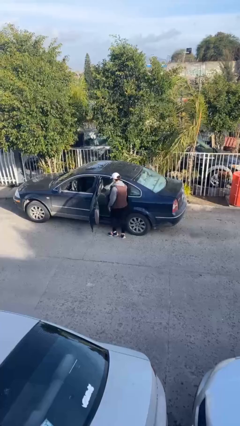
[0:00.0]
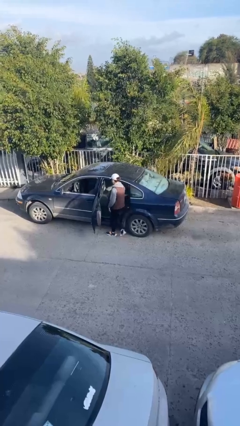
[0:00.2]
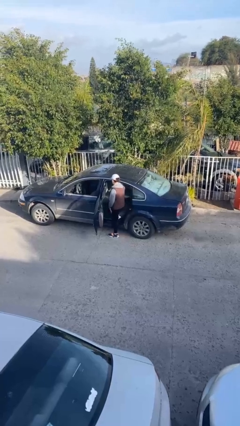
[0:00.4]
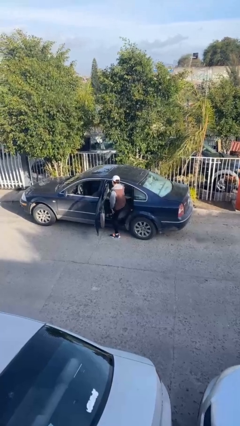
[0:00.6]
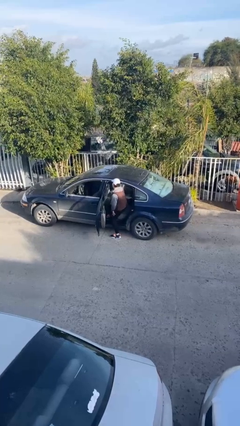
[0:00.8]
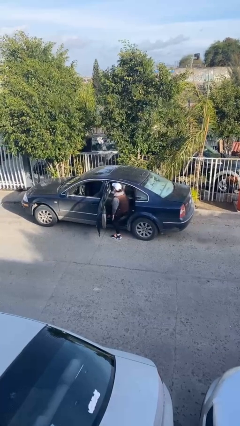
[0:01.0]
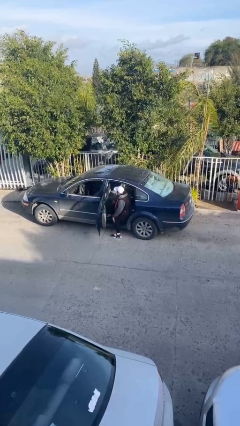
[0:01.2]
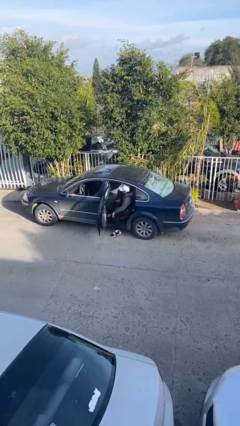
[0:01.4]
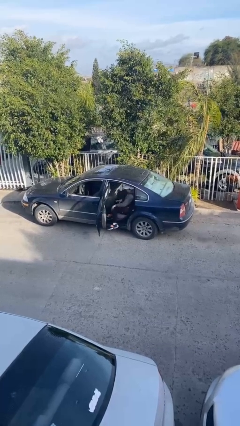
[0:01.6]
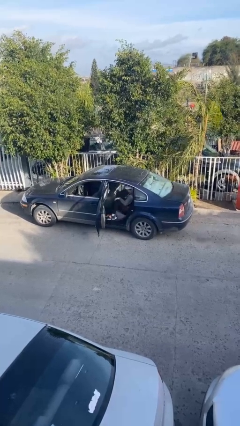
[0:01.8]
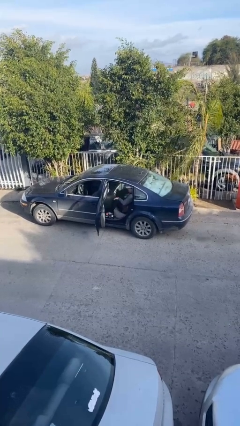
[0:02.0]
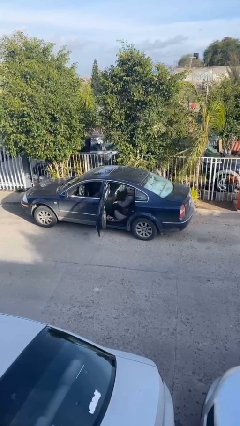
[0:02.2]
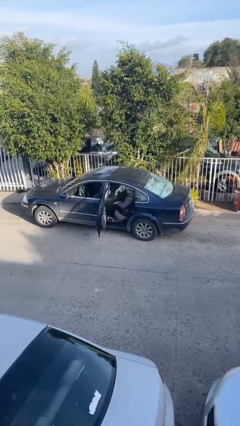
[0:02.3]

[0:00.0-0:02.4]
person enters car

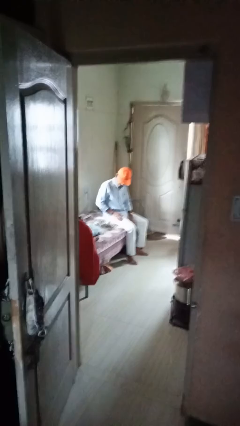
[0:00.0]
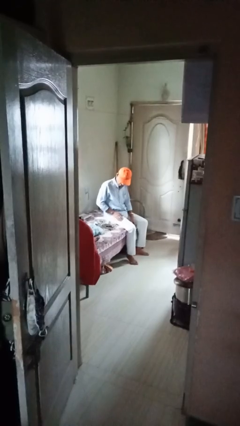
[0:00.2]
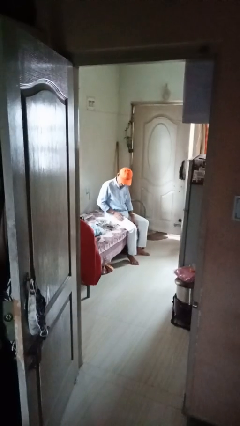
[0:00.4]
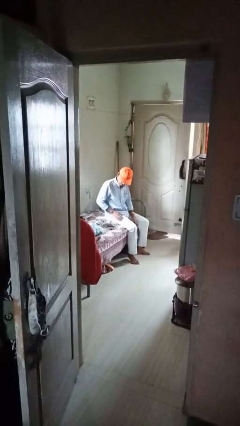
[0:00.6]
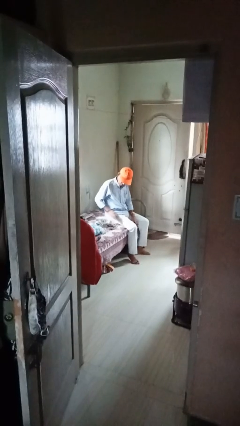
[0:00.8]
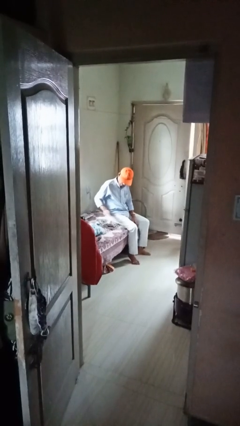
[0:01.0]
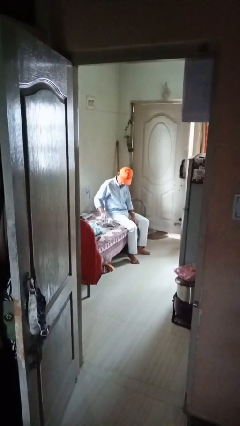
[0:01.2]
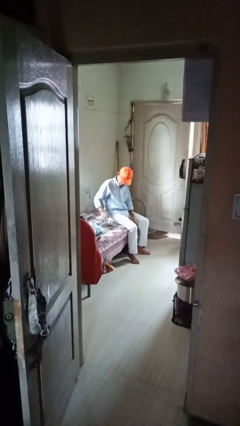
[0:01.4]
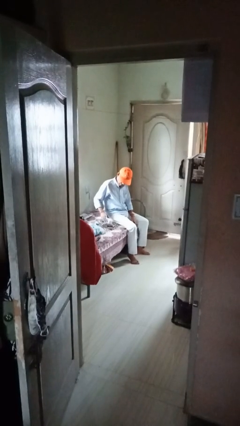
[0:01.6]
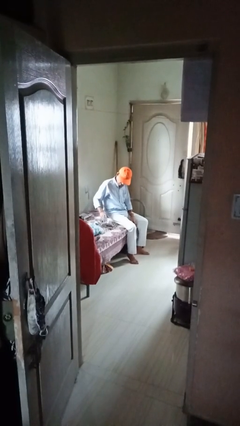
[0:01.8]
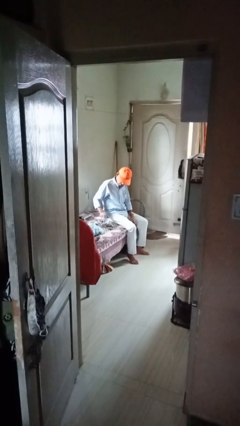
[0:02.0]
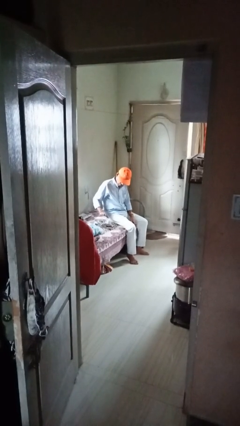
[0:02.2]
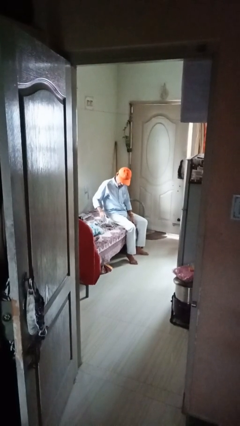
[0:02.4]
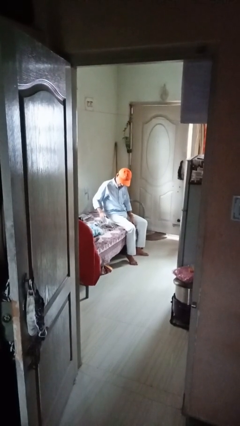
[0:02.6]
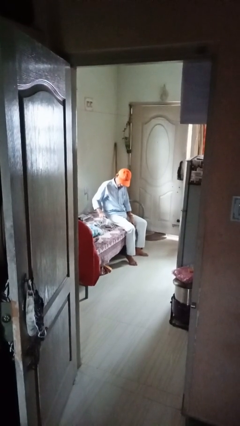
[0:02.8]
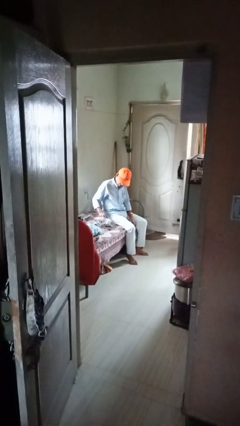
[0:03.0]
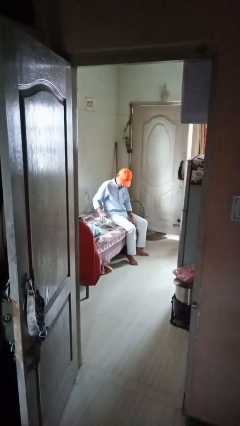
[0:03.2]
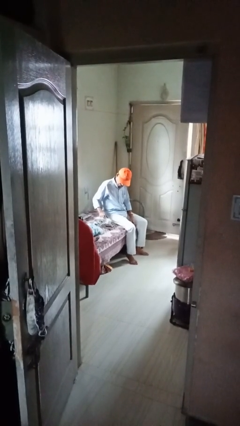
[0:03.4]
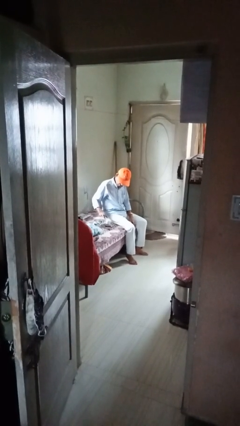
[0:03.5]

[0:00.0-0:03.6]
person taps object with finger

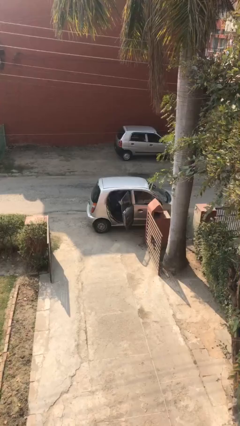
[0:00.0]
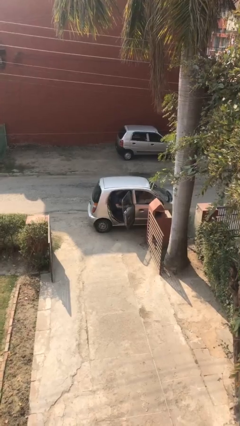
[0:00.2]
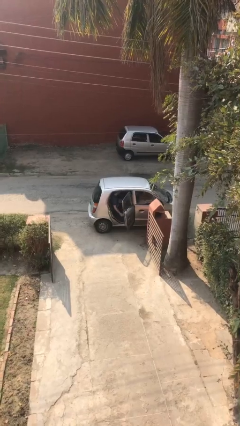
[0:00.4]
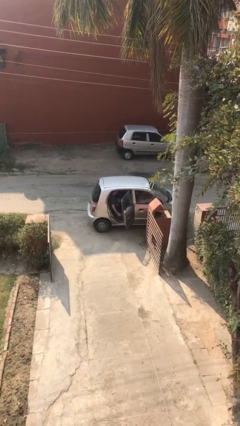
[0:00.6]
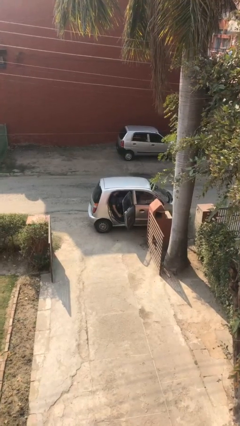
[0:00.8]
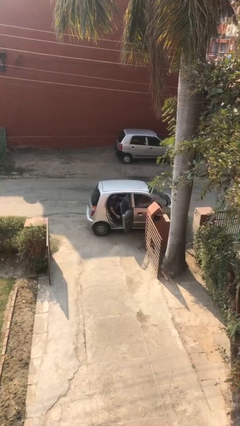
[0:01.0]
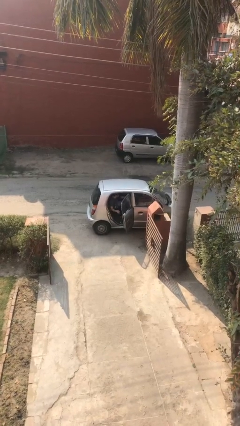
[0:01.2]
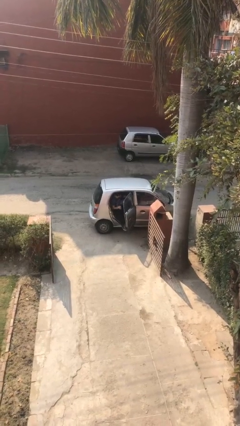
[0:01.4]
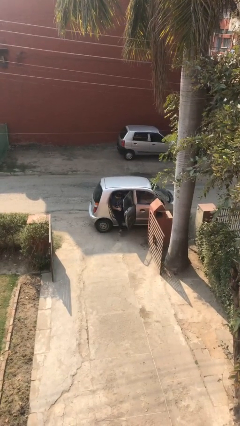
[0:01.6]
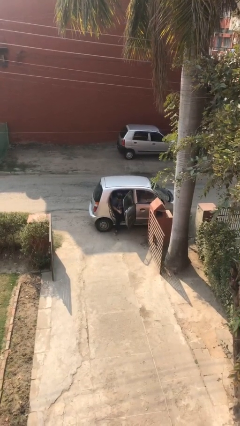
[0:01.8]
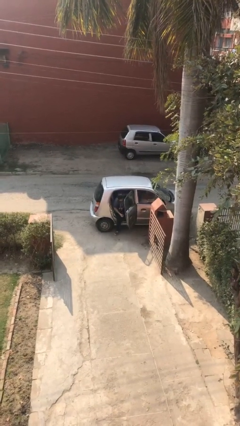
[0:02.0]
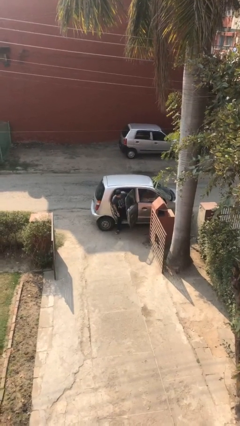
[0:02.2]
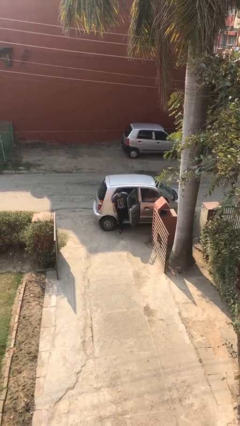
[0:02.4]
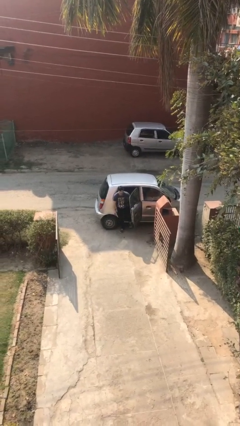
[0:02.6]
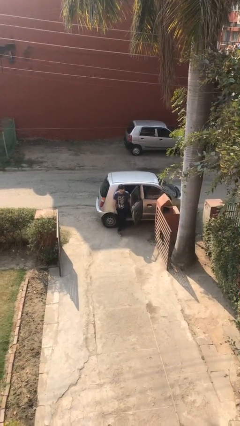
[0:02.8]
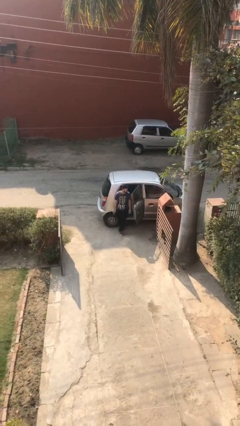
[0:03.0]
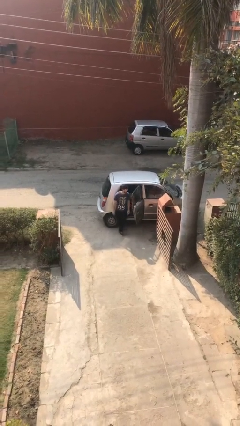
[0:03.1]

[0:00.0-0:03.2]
person exits car

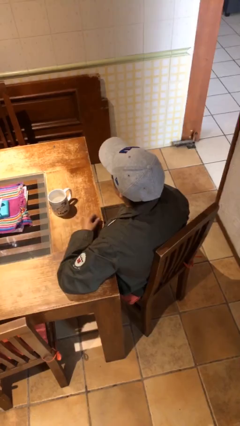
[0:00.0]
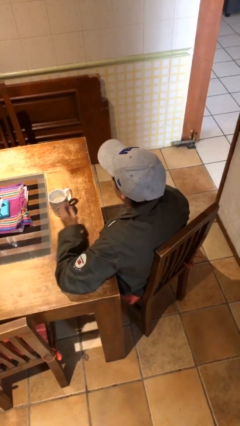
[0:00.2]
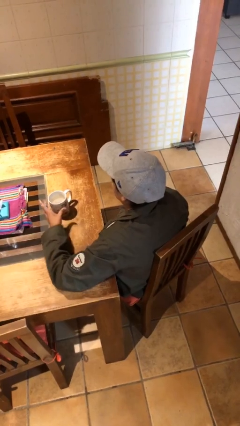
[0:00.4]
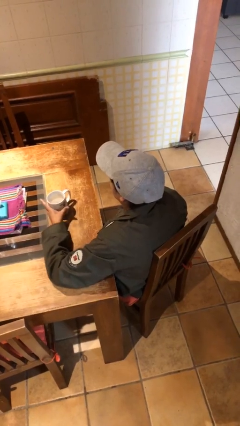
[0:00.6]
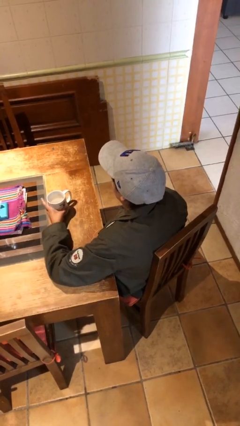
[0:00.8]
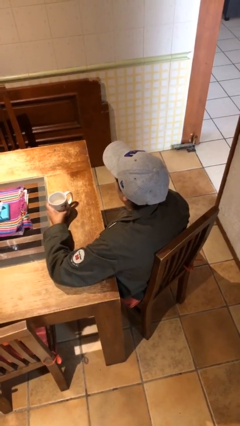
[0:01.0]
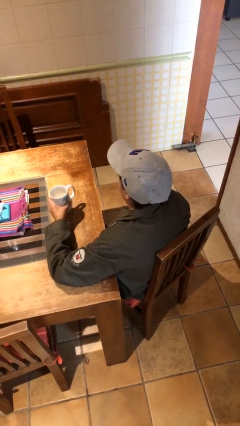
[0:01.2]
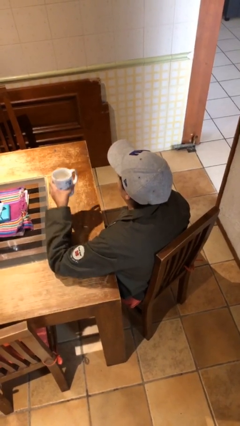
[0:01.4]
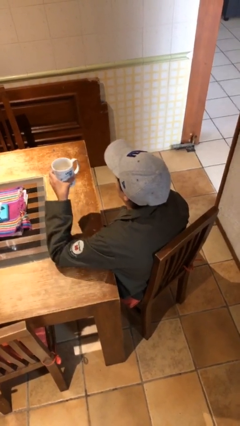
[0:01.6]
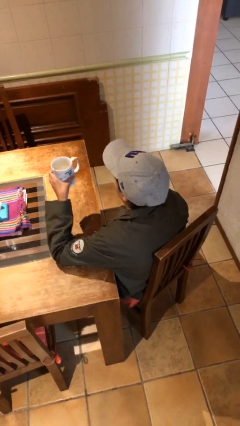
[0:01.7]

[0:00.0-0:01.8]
person picks up object from table

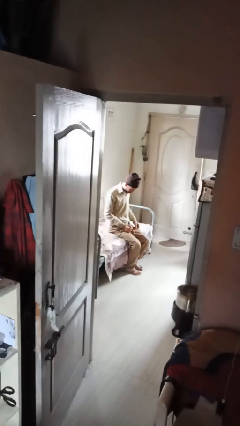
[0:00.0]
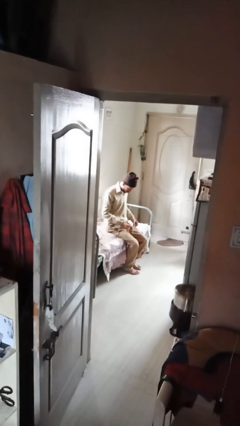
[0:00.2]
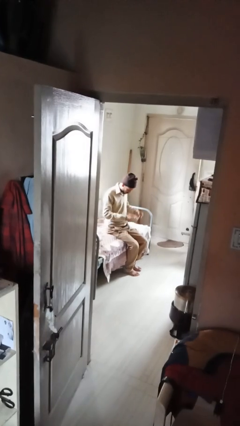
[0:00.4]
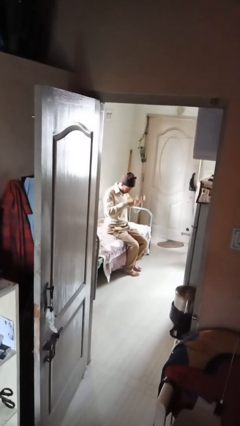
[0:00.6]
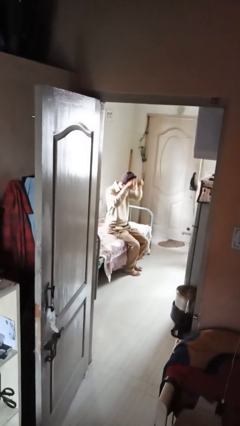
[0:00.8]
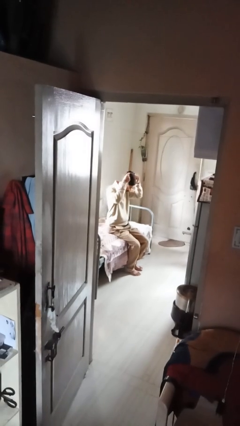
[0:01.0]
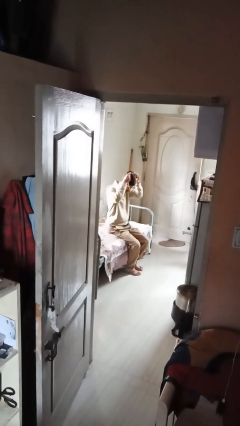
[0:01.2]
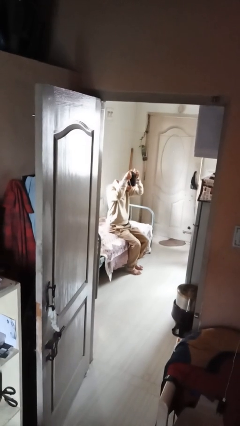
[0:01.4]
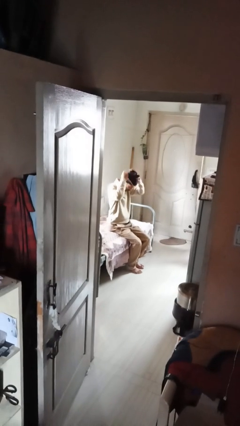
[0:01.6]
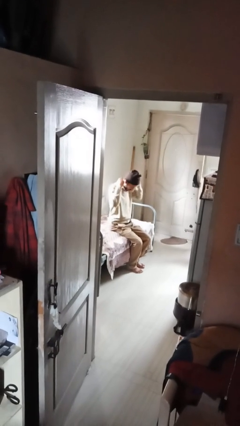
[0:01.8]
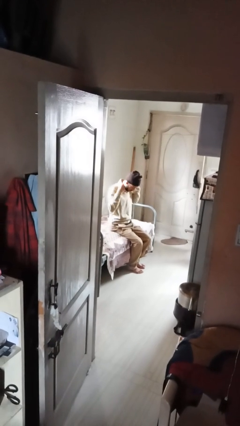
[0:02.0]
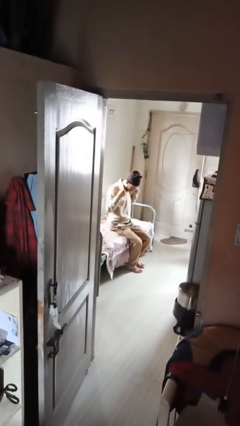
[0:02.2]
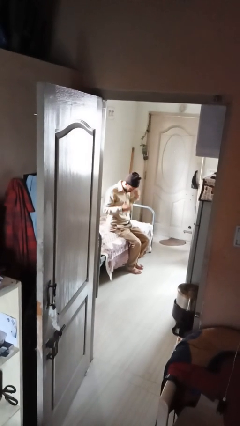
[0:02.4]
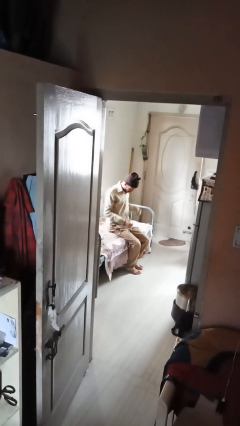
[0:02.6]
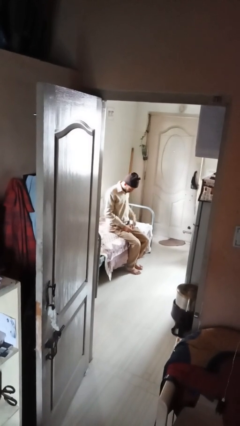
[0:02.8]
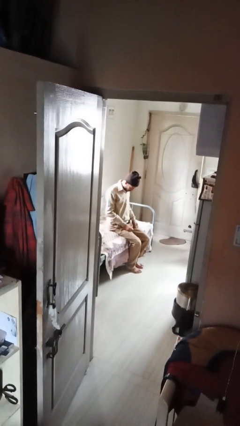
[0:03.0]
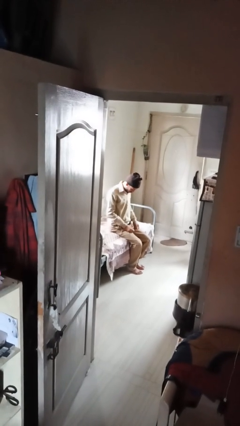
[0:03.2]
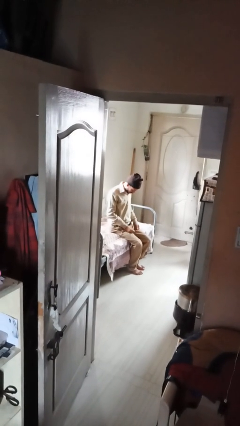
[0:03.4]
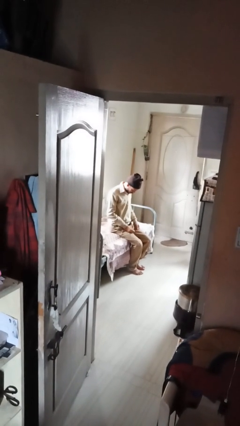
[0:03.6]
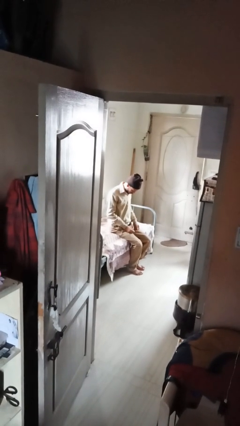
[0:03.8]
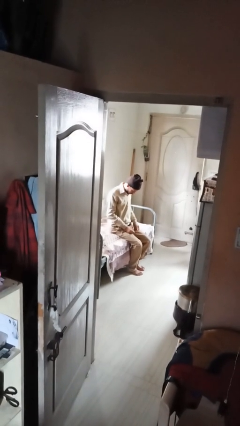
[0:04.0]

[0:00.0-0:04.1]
person puts on necklace

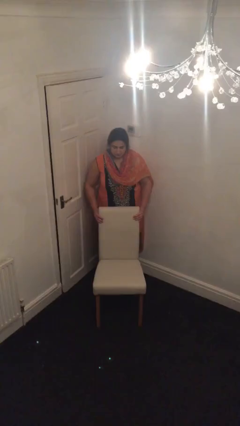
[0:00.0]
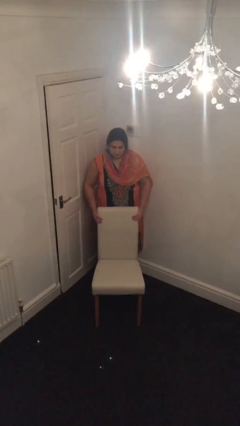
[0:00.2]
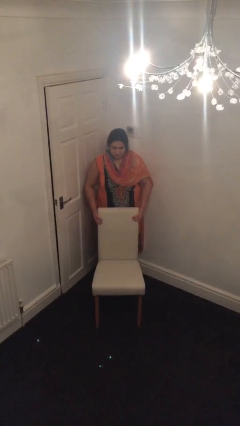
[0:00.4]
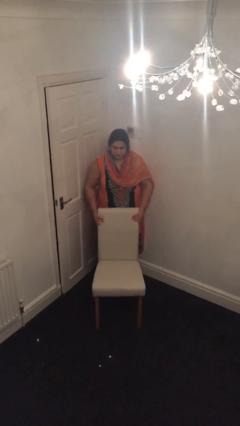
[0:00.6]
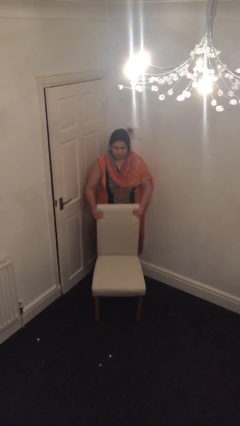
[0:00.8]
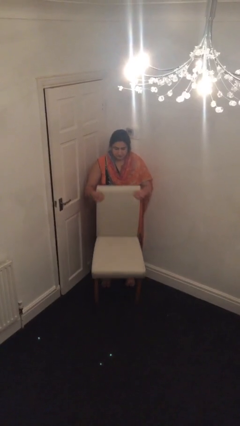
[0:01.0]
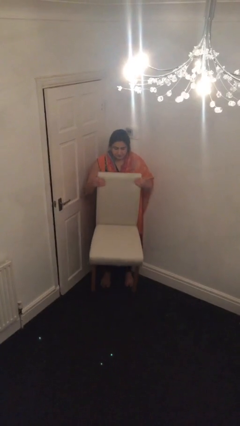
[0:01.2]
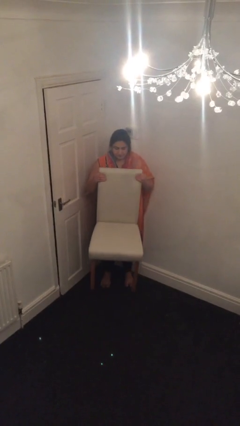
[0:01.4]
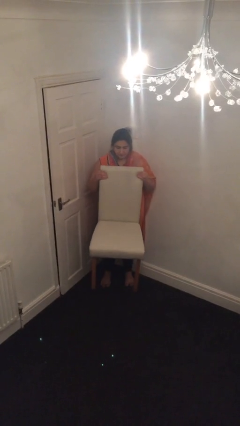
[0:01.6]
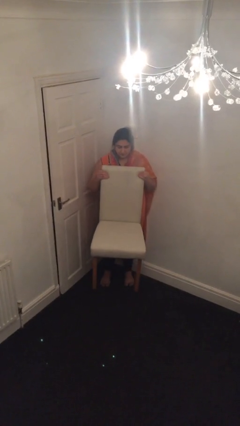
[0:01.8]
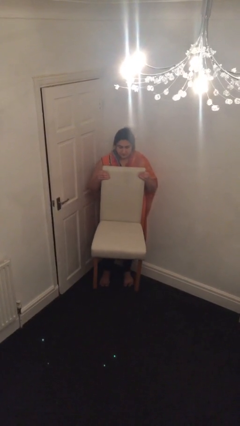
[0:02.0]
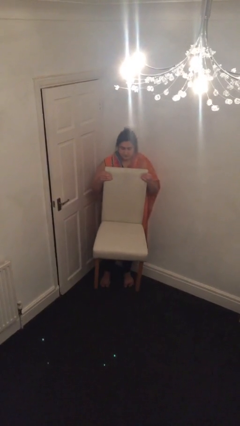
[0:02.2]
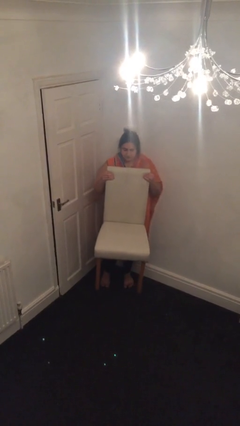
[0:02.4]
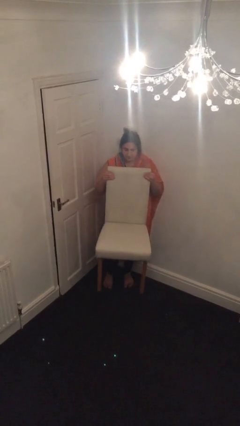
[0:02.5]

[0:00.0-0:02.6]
person picks up object from floor
